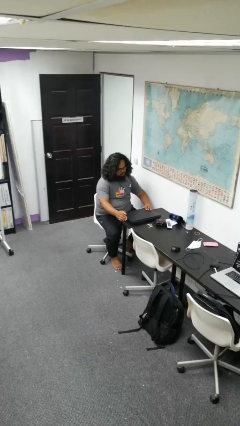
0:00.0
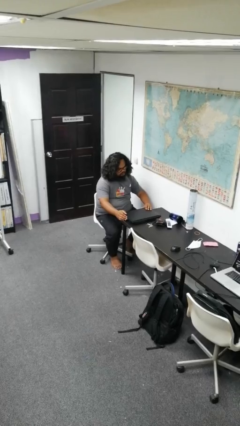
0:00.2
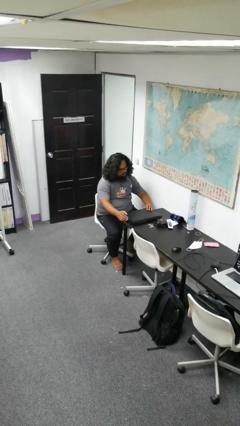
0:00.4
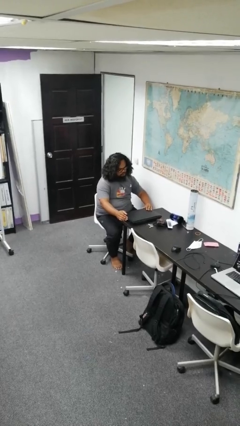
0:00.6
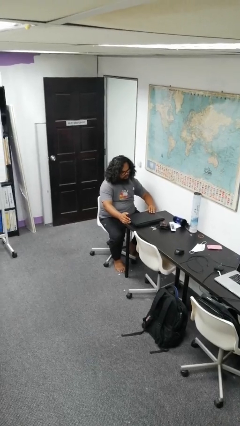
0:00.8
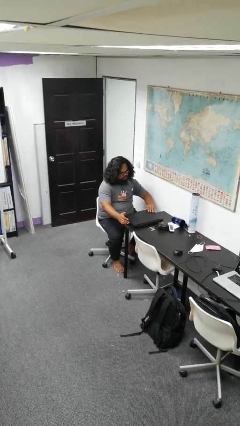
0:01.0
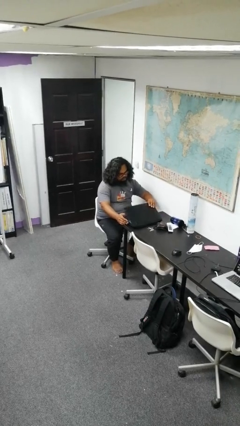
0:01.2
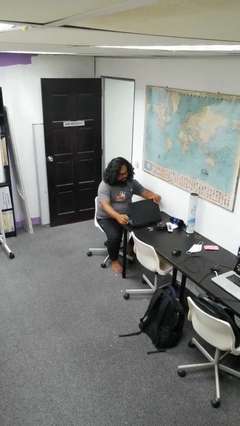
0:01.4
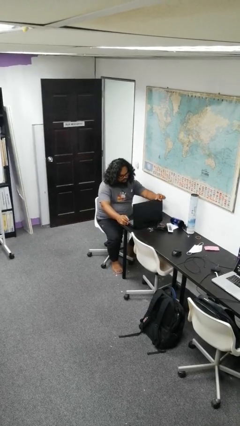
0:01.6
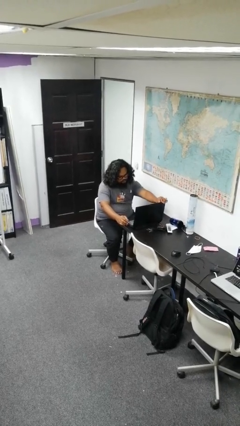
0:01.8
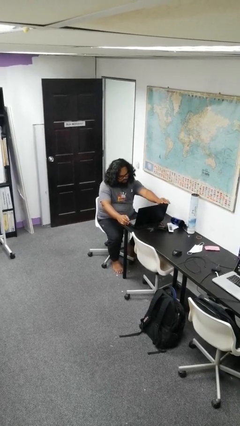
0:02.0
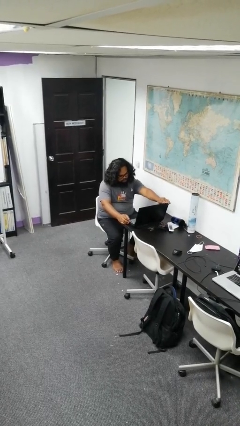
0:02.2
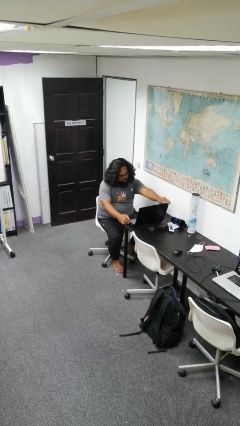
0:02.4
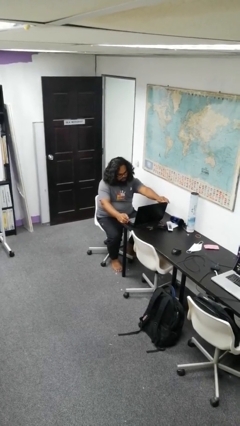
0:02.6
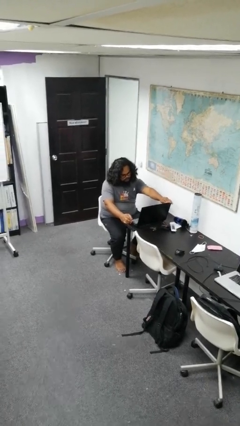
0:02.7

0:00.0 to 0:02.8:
person opens laptop

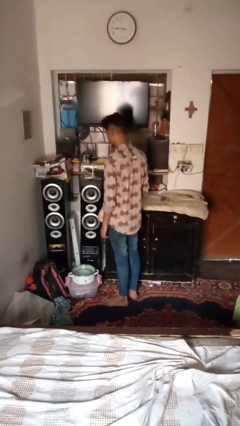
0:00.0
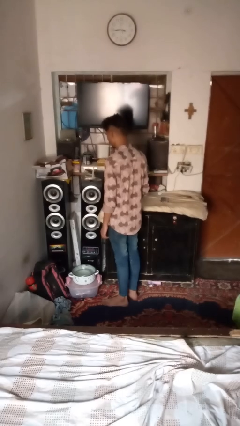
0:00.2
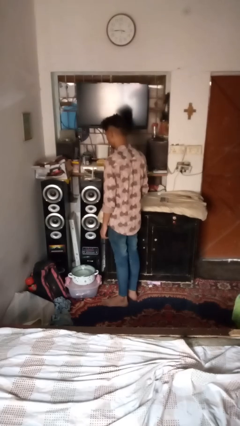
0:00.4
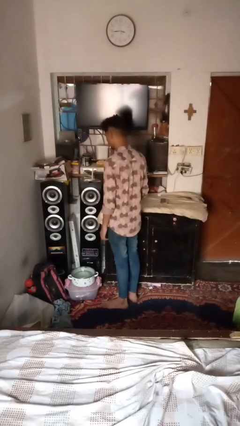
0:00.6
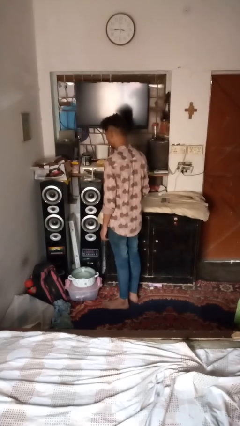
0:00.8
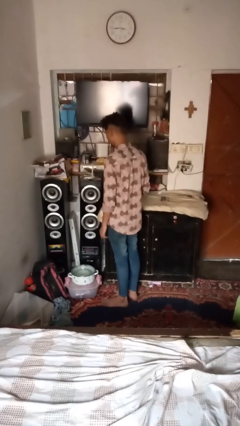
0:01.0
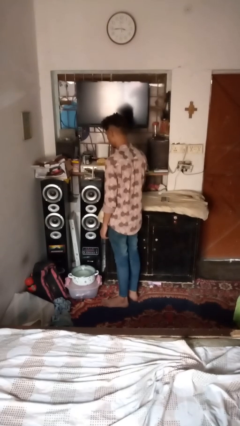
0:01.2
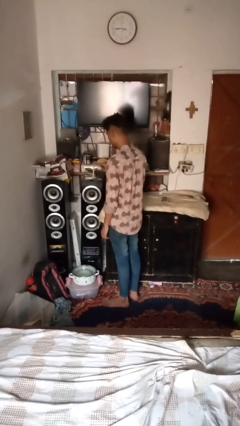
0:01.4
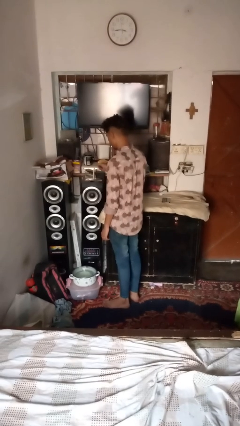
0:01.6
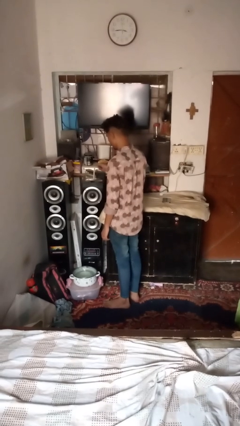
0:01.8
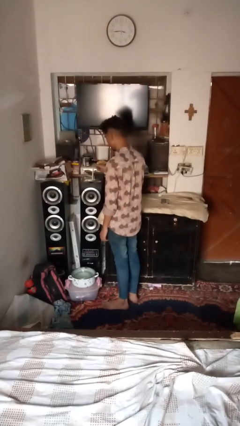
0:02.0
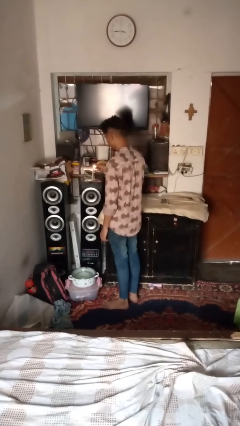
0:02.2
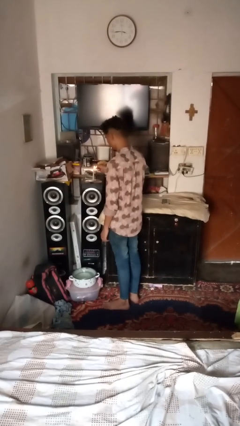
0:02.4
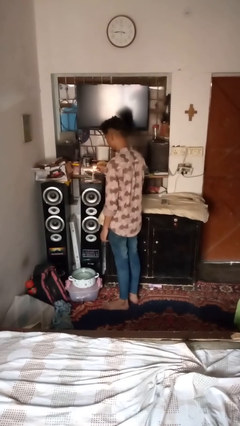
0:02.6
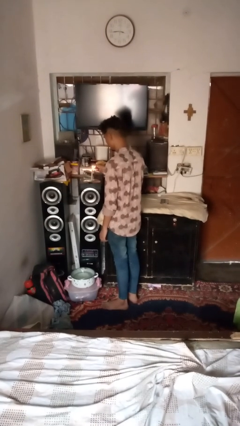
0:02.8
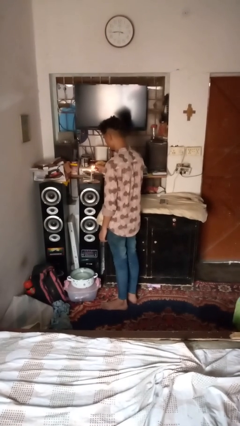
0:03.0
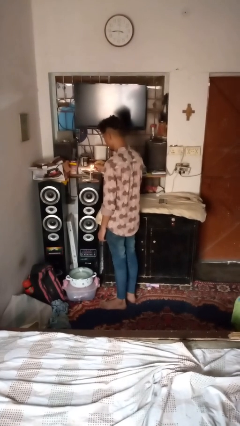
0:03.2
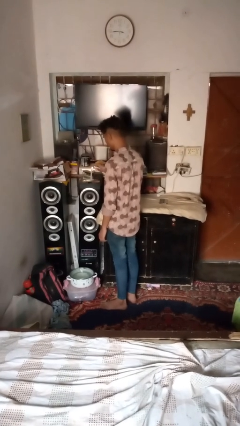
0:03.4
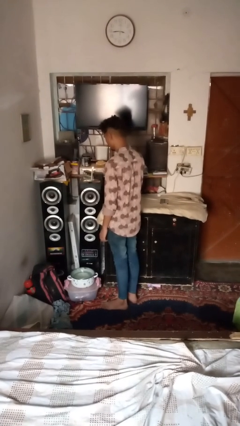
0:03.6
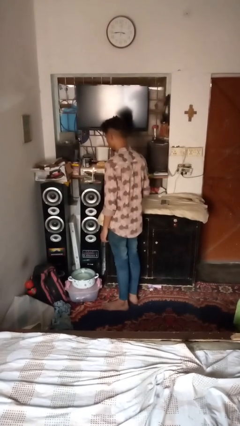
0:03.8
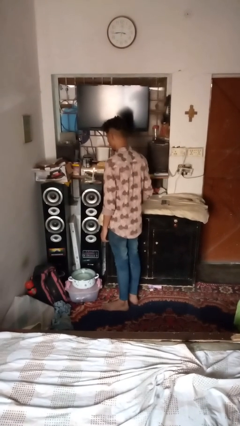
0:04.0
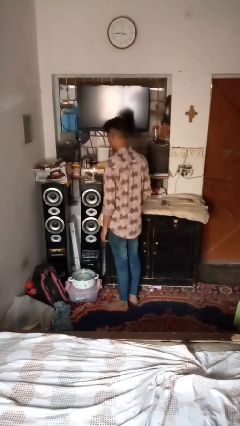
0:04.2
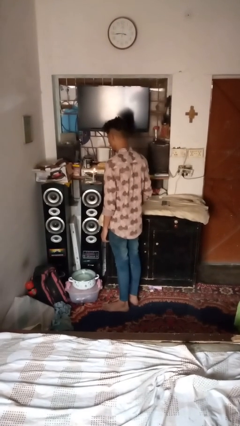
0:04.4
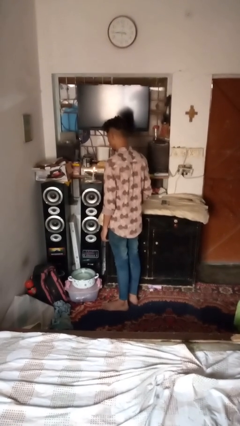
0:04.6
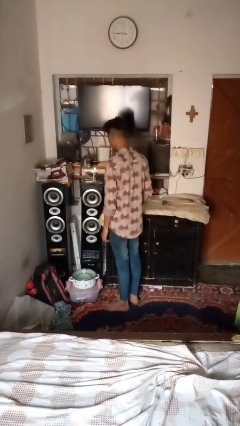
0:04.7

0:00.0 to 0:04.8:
person lights candle

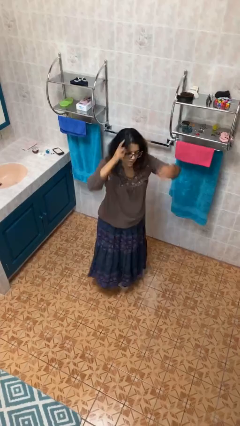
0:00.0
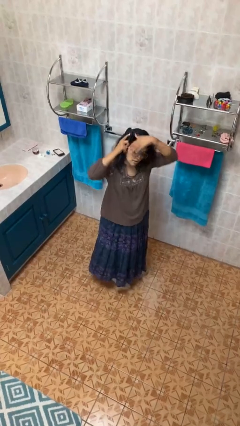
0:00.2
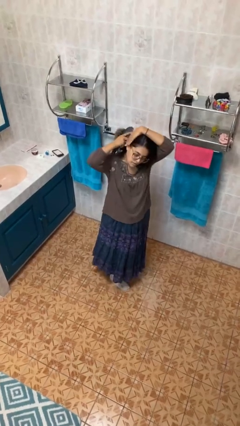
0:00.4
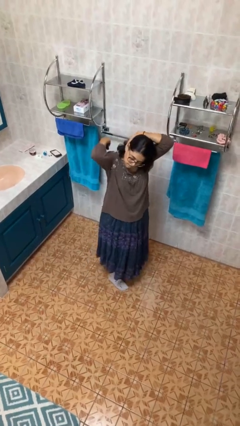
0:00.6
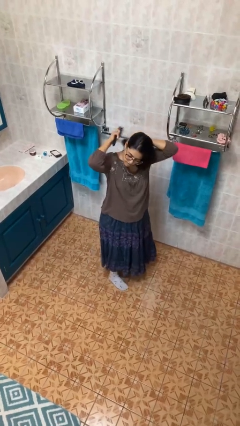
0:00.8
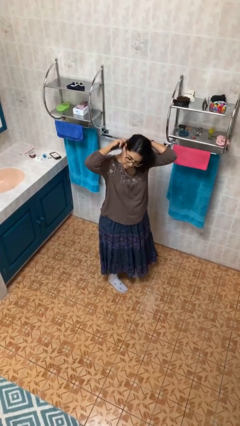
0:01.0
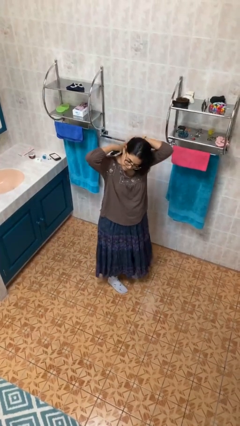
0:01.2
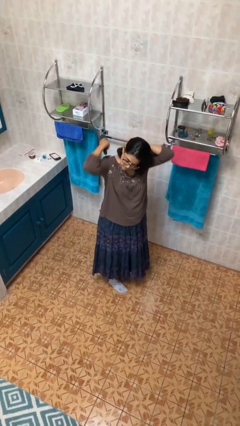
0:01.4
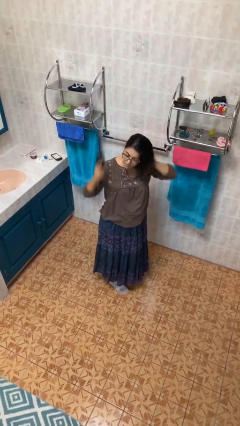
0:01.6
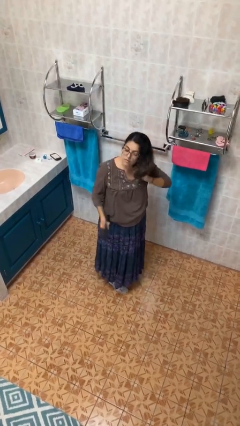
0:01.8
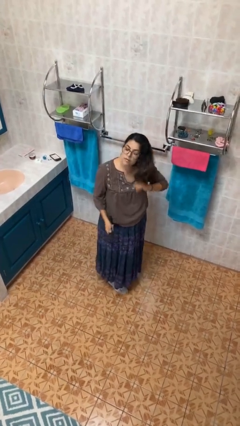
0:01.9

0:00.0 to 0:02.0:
person brushes hair

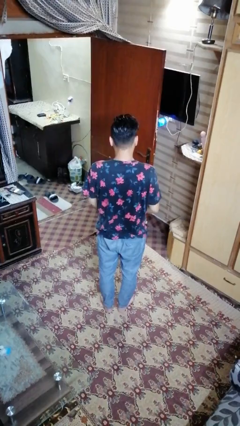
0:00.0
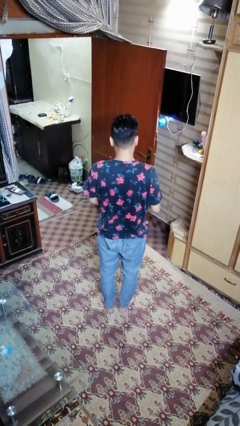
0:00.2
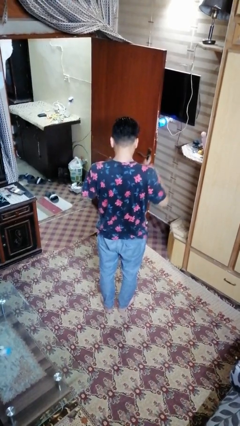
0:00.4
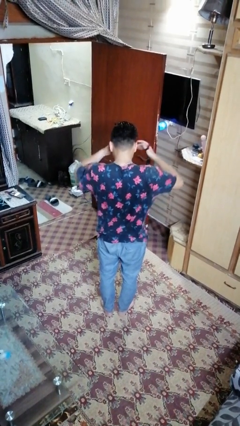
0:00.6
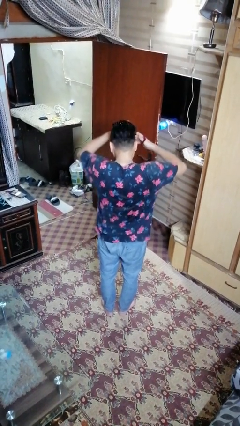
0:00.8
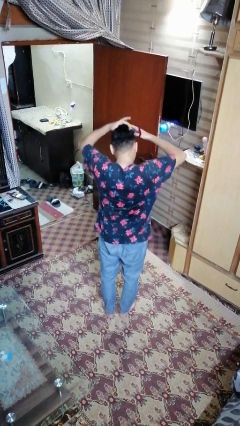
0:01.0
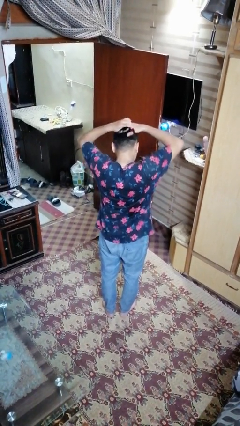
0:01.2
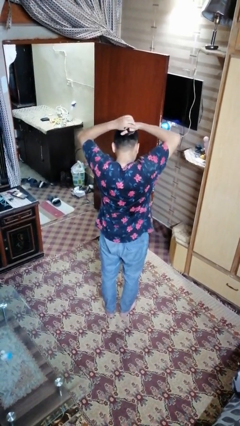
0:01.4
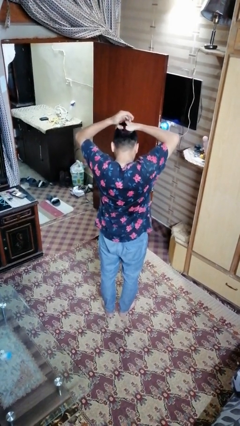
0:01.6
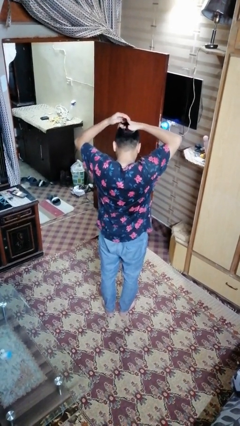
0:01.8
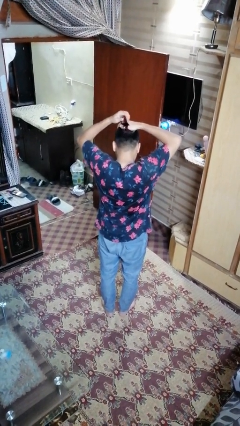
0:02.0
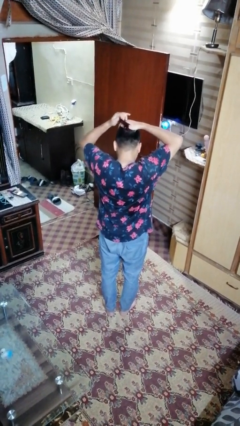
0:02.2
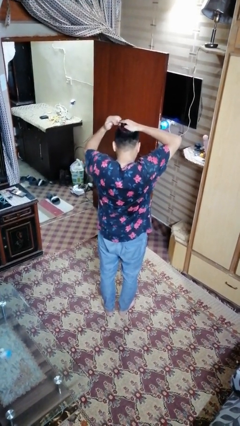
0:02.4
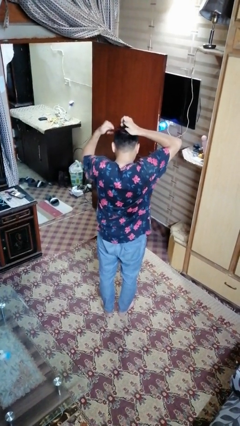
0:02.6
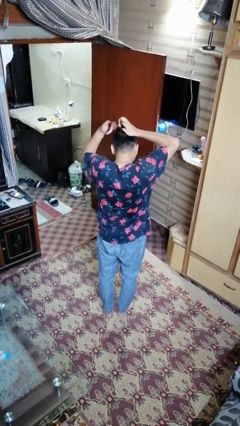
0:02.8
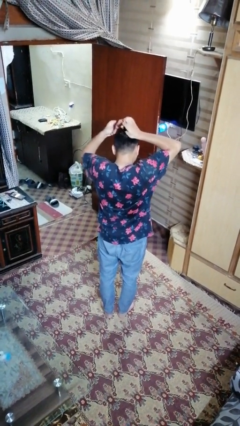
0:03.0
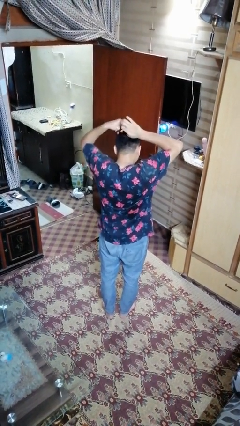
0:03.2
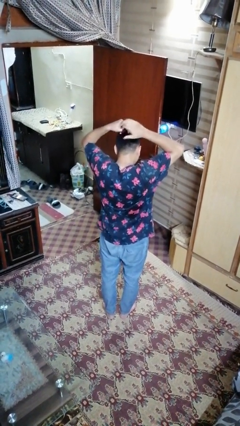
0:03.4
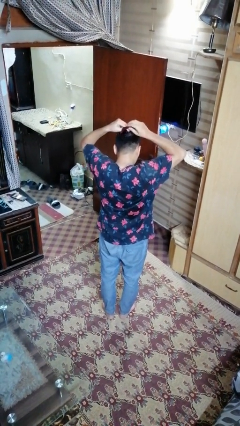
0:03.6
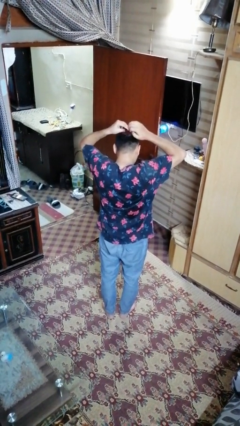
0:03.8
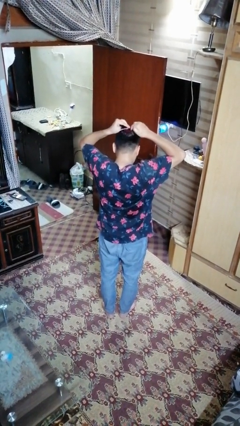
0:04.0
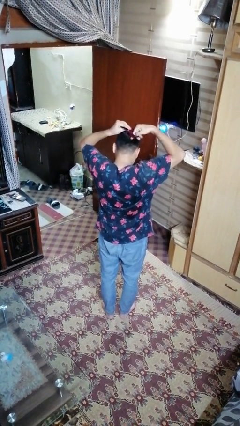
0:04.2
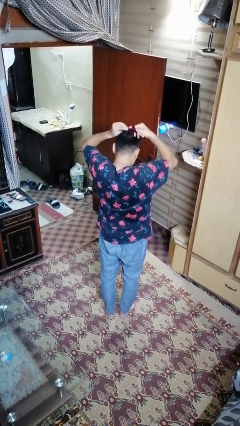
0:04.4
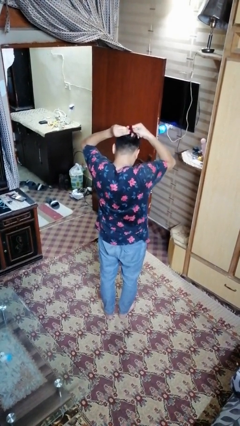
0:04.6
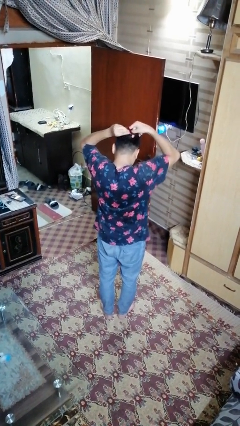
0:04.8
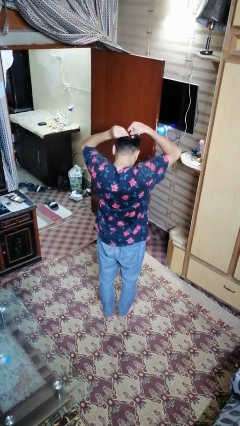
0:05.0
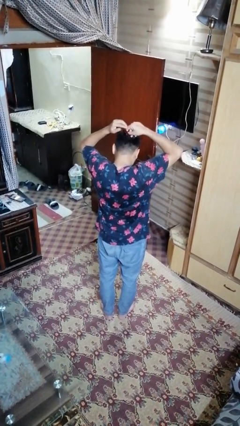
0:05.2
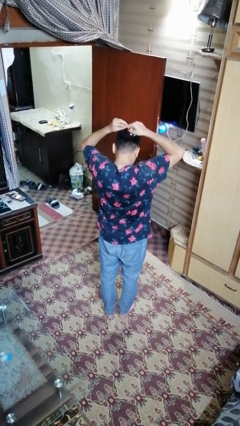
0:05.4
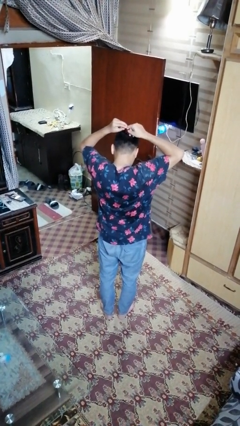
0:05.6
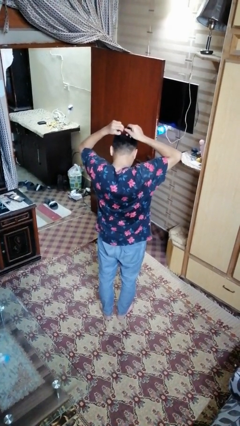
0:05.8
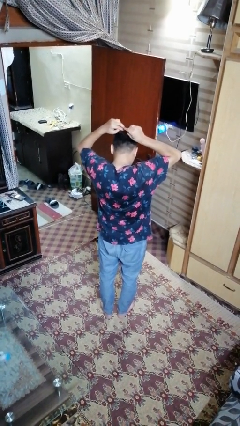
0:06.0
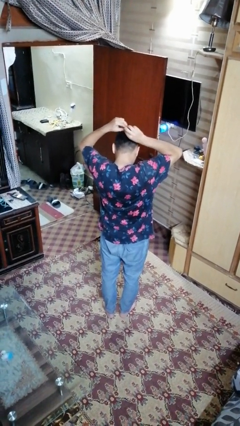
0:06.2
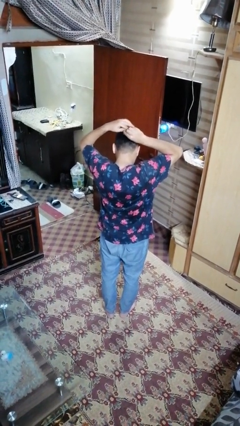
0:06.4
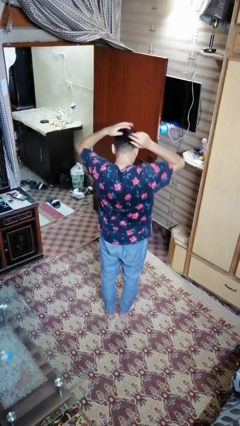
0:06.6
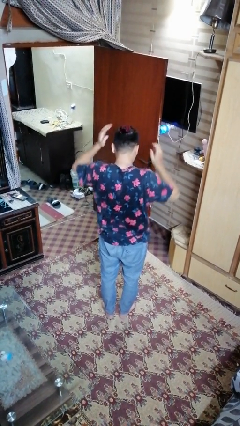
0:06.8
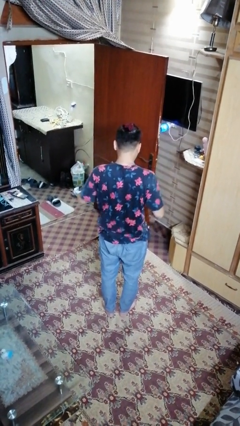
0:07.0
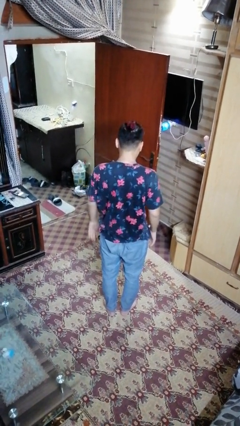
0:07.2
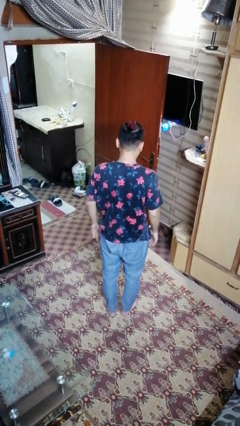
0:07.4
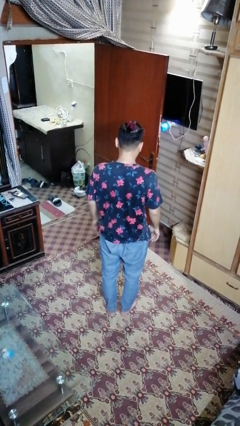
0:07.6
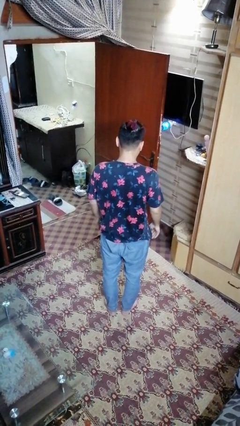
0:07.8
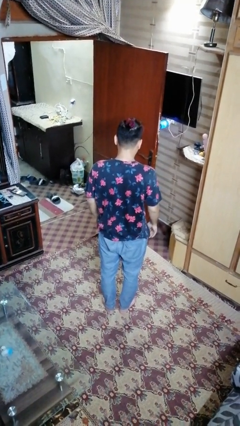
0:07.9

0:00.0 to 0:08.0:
person puts hair in ponytail

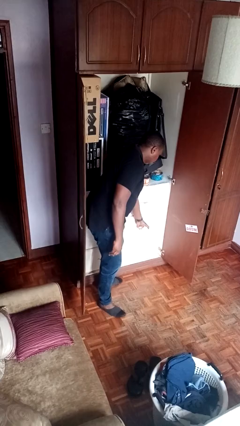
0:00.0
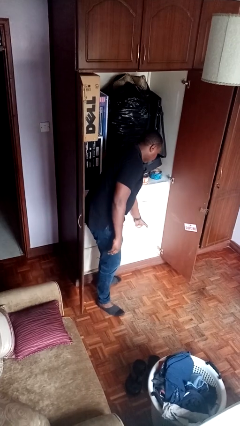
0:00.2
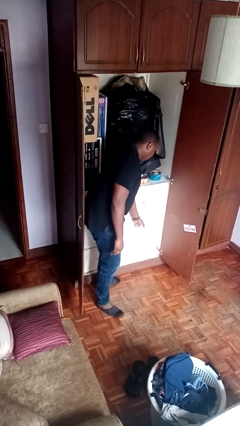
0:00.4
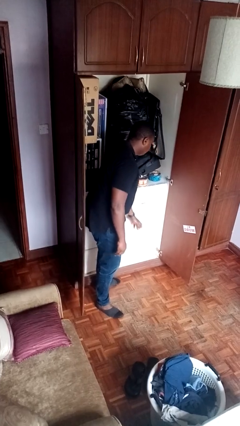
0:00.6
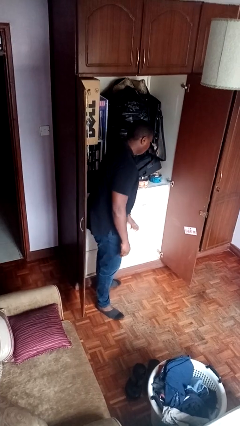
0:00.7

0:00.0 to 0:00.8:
person closes dresser drawer
